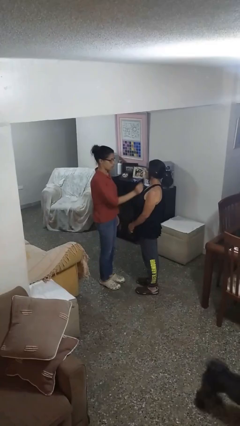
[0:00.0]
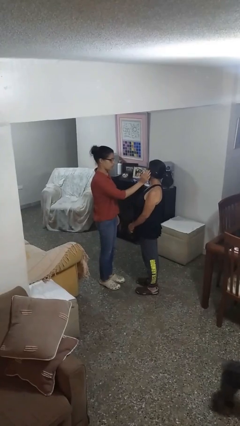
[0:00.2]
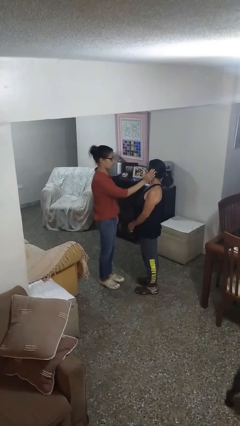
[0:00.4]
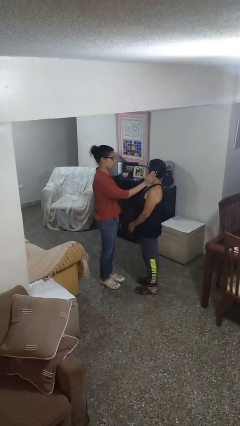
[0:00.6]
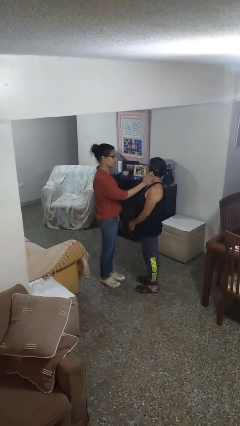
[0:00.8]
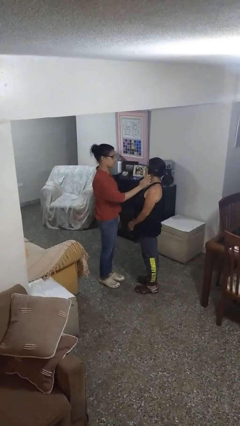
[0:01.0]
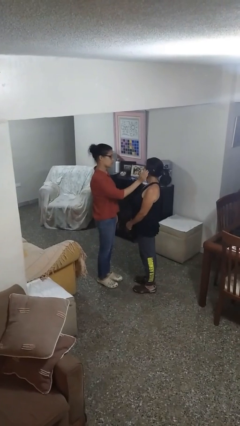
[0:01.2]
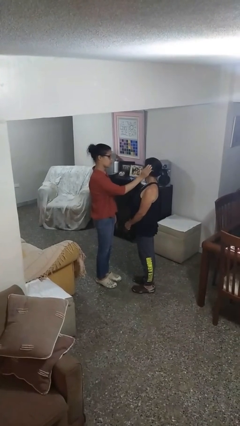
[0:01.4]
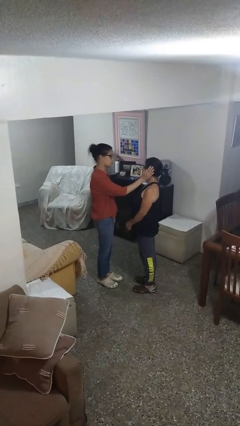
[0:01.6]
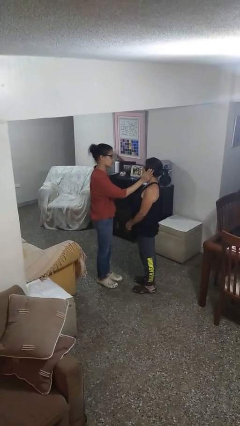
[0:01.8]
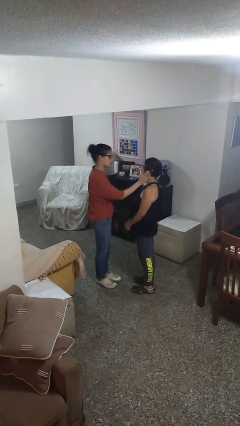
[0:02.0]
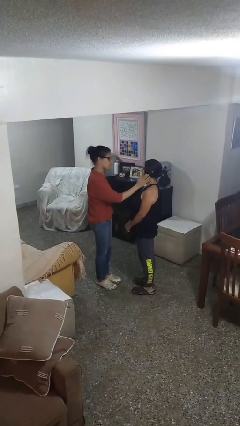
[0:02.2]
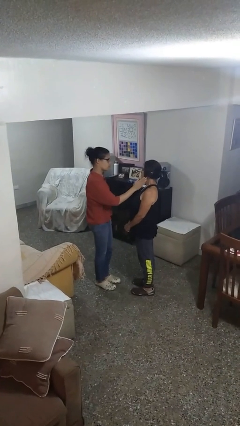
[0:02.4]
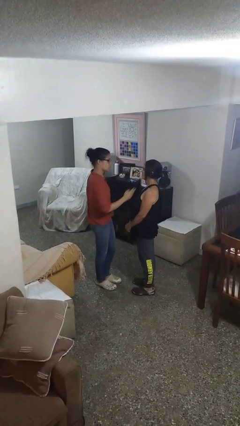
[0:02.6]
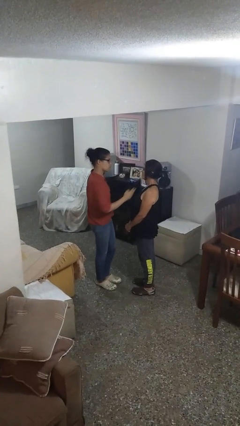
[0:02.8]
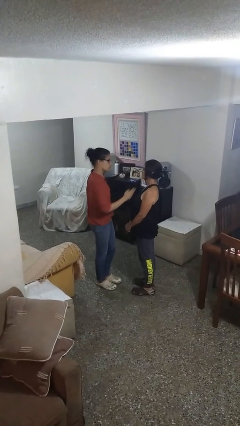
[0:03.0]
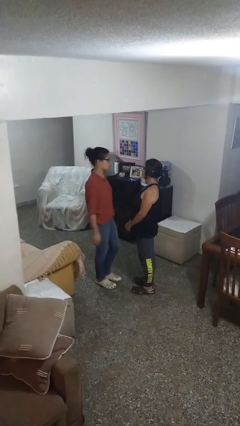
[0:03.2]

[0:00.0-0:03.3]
person touches face of person

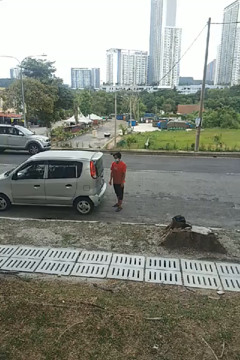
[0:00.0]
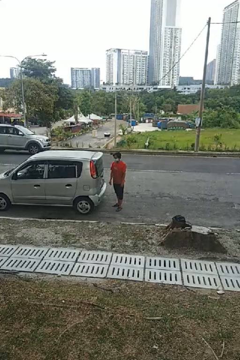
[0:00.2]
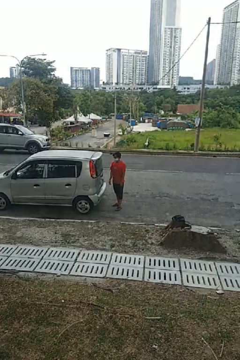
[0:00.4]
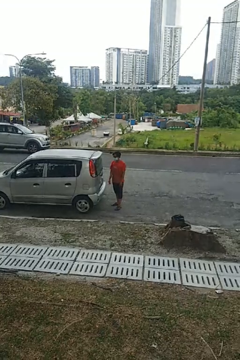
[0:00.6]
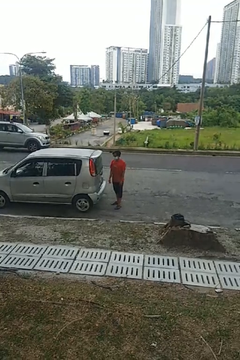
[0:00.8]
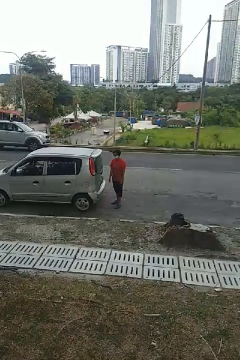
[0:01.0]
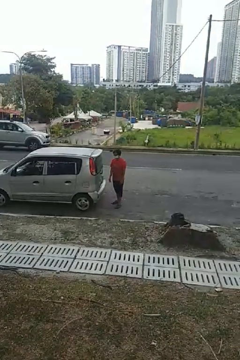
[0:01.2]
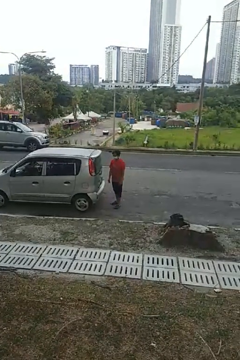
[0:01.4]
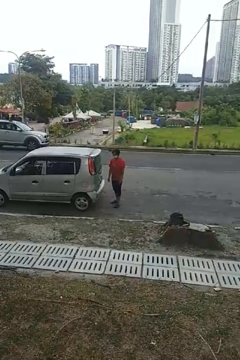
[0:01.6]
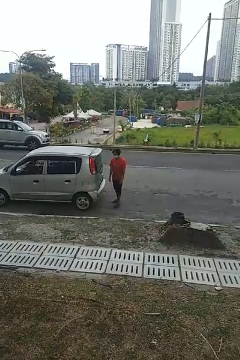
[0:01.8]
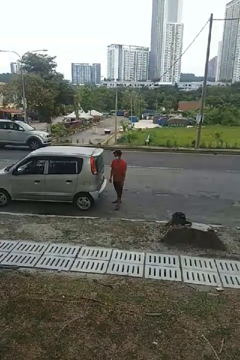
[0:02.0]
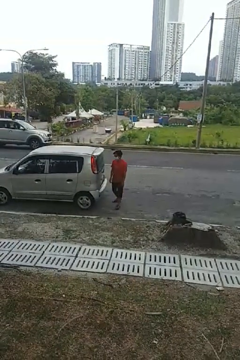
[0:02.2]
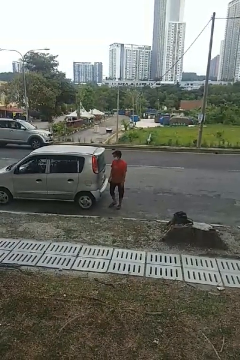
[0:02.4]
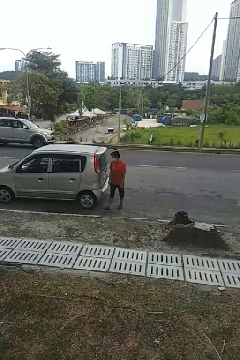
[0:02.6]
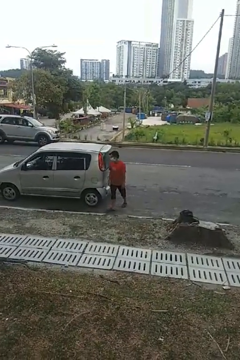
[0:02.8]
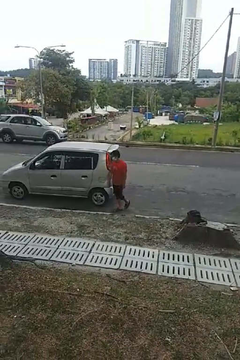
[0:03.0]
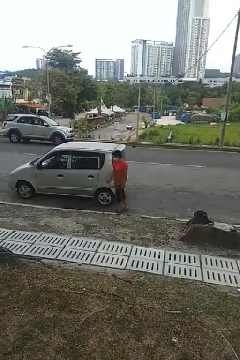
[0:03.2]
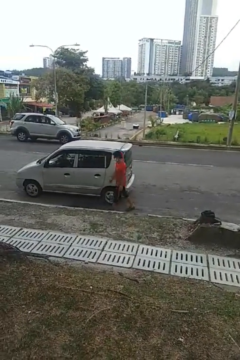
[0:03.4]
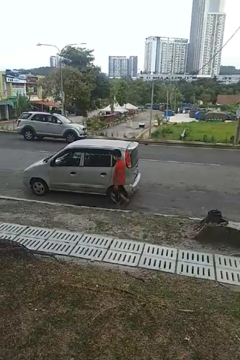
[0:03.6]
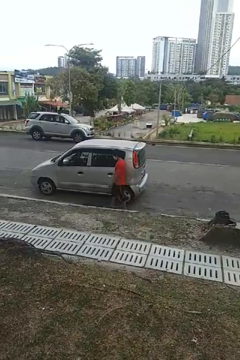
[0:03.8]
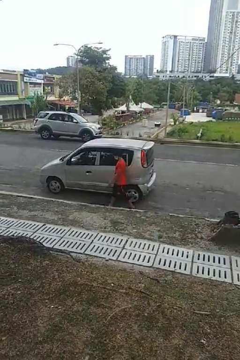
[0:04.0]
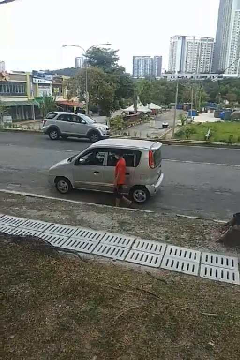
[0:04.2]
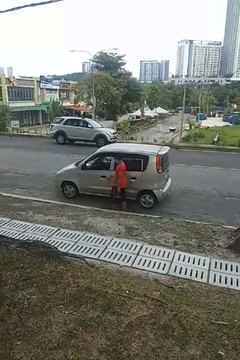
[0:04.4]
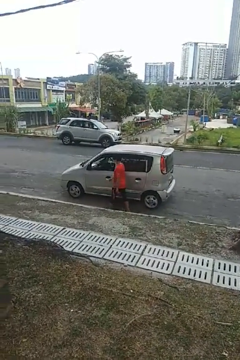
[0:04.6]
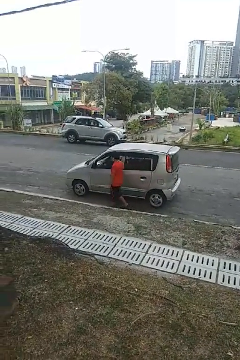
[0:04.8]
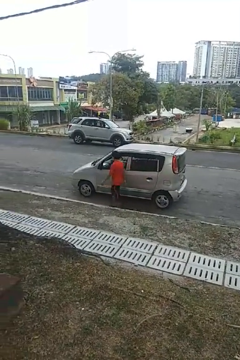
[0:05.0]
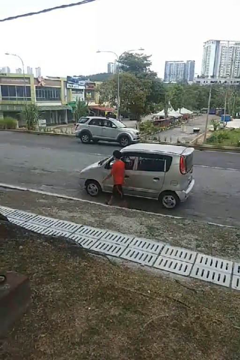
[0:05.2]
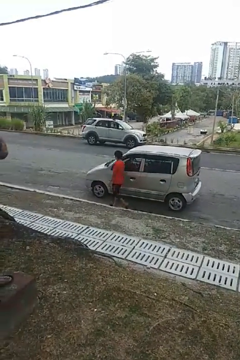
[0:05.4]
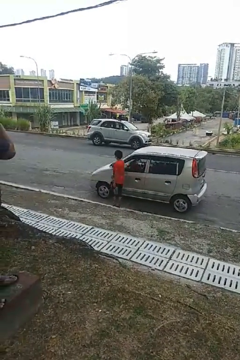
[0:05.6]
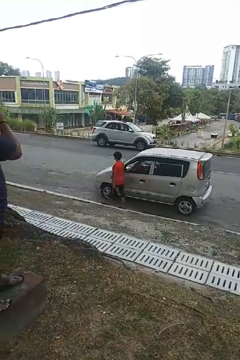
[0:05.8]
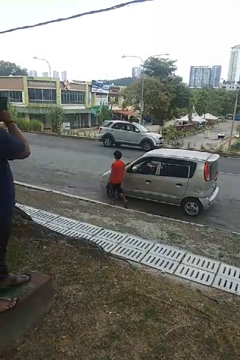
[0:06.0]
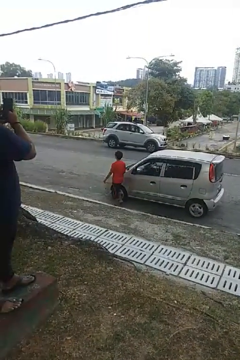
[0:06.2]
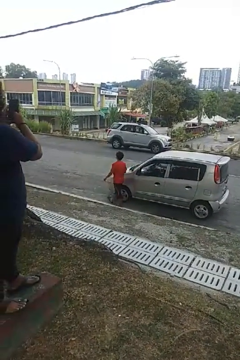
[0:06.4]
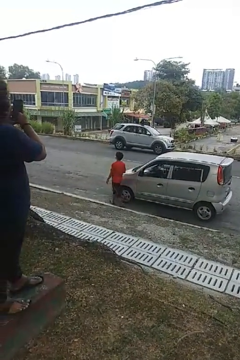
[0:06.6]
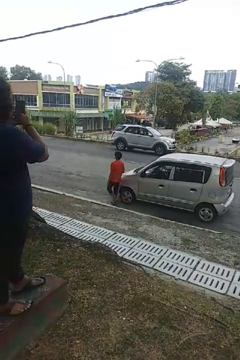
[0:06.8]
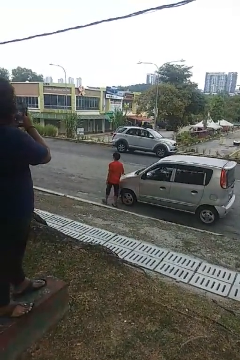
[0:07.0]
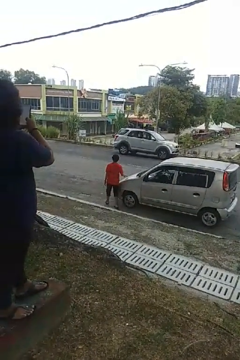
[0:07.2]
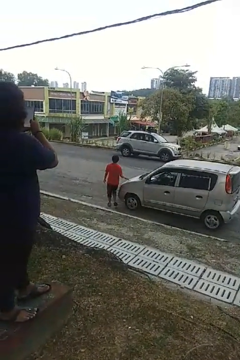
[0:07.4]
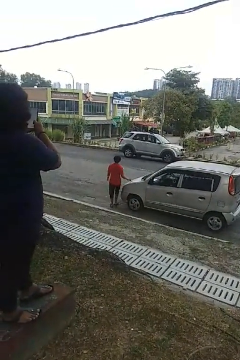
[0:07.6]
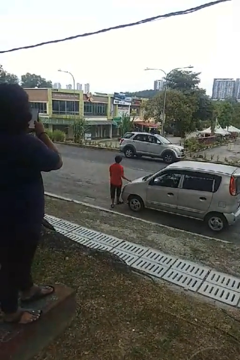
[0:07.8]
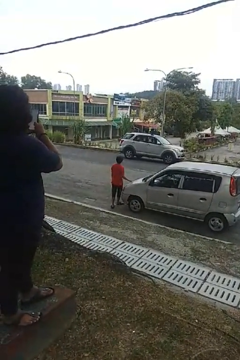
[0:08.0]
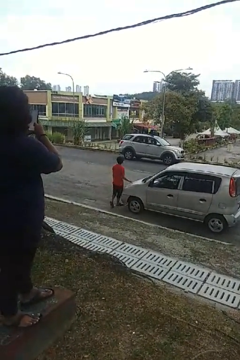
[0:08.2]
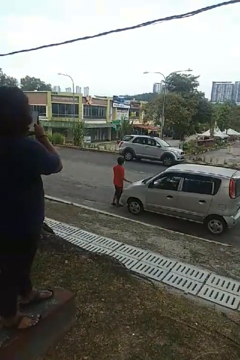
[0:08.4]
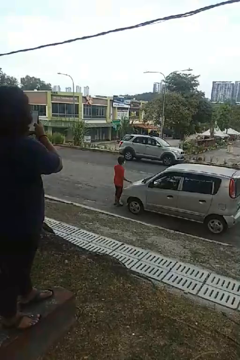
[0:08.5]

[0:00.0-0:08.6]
person walks around car

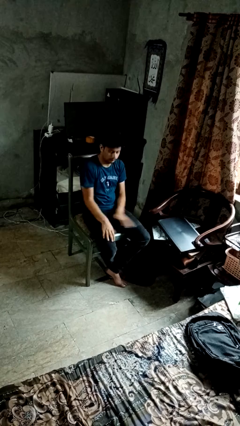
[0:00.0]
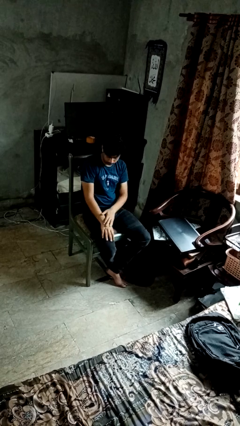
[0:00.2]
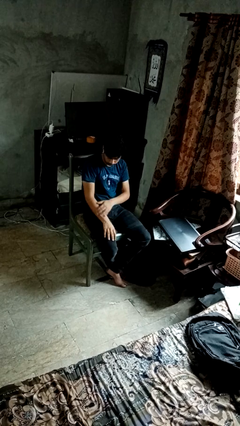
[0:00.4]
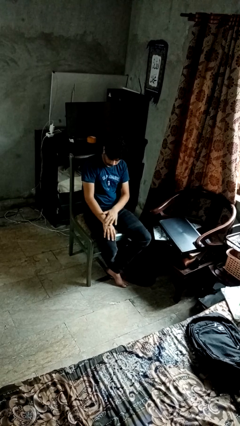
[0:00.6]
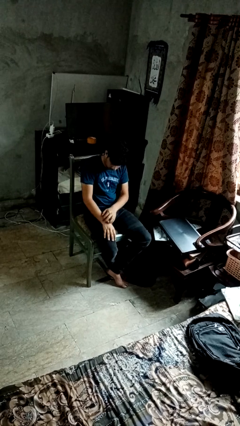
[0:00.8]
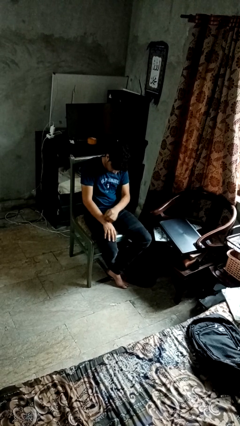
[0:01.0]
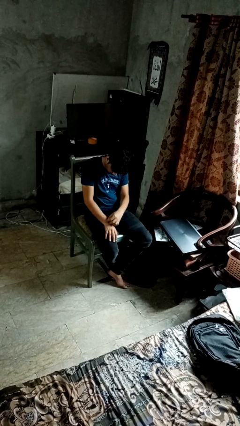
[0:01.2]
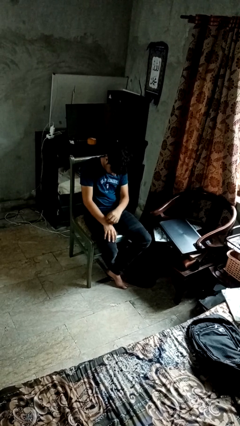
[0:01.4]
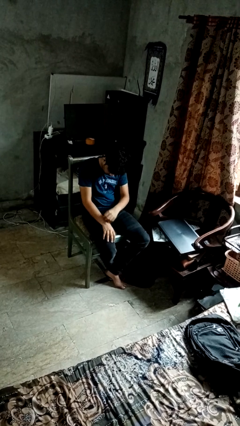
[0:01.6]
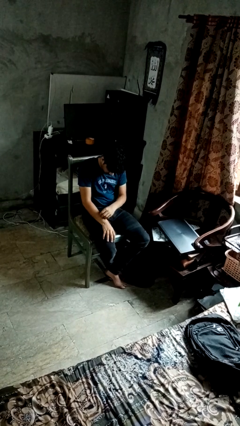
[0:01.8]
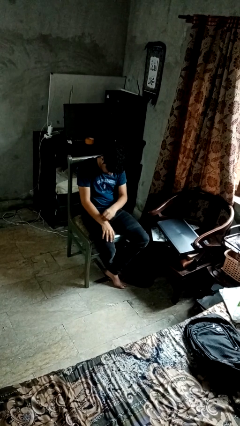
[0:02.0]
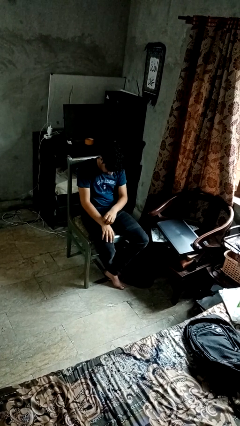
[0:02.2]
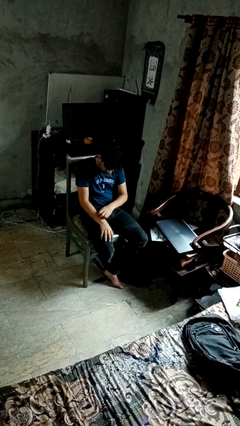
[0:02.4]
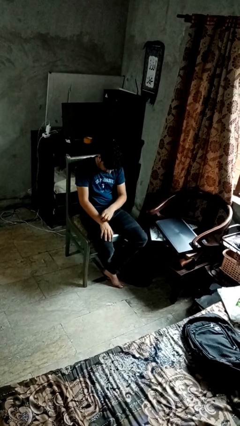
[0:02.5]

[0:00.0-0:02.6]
person swats bug

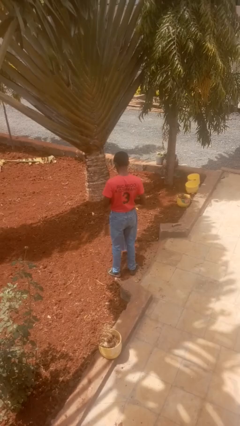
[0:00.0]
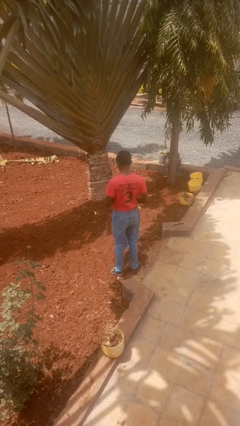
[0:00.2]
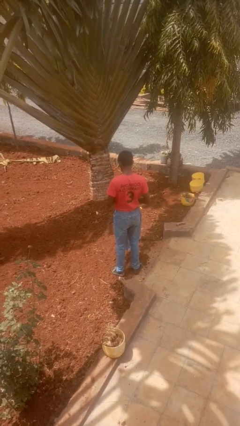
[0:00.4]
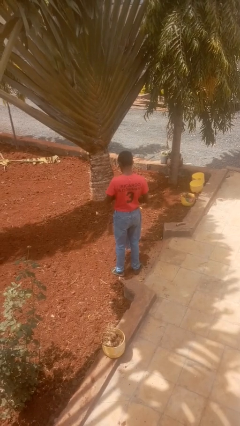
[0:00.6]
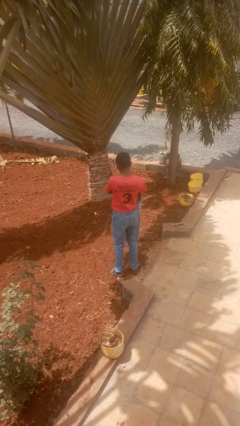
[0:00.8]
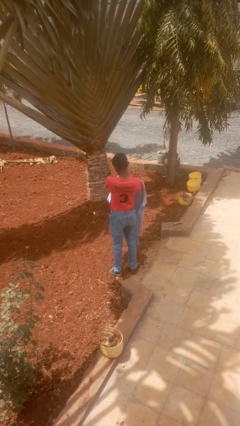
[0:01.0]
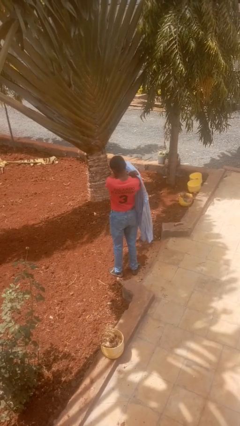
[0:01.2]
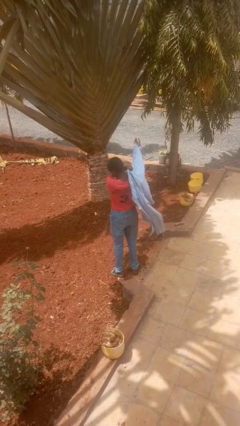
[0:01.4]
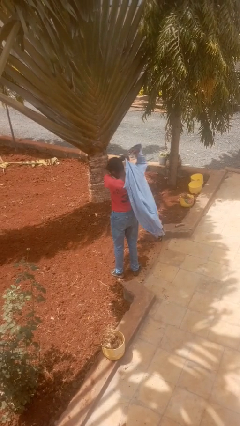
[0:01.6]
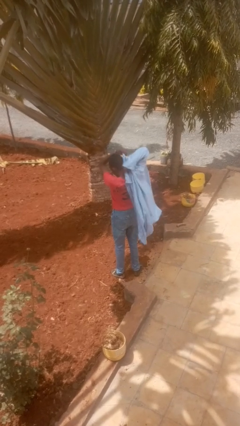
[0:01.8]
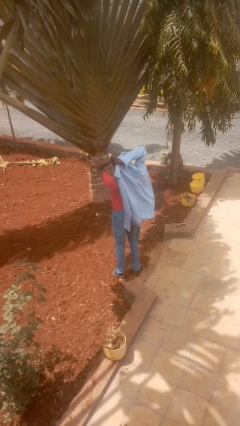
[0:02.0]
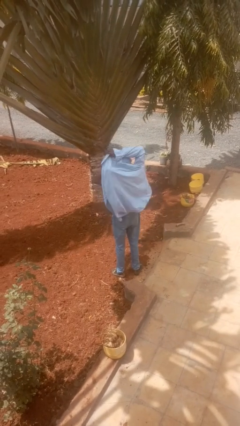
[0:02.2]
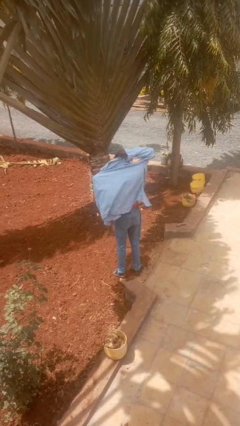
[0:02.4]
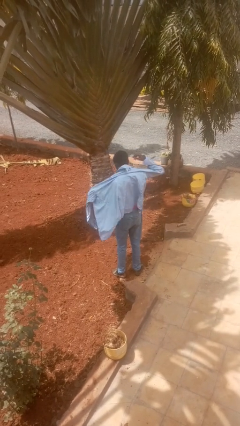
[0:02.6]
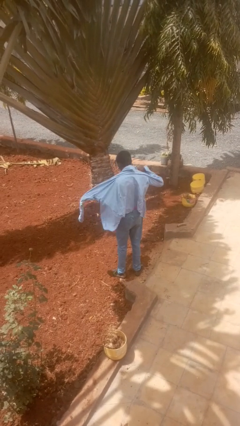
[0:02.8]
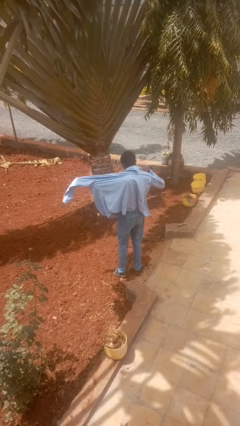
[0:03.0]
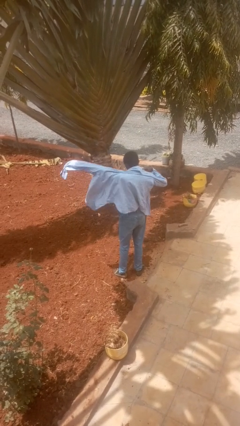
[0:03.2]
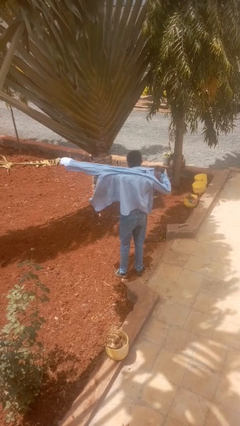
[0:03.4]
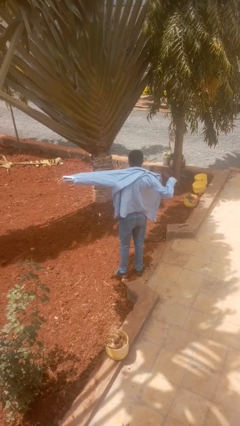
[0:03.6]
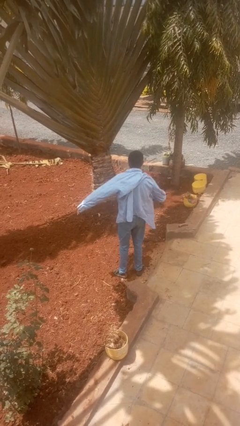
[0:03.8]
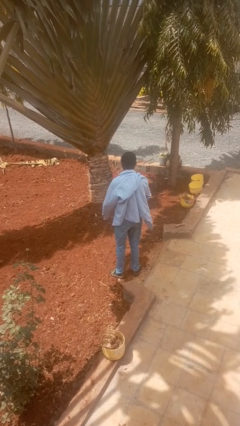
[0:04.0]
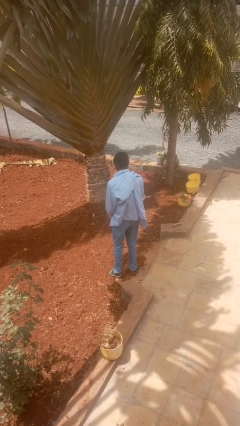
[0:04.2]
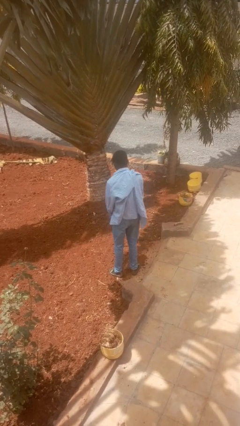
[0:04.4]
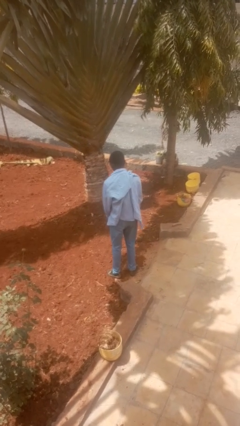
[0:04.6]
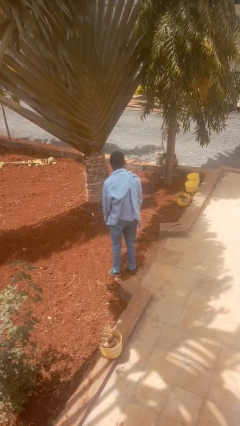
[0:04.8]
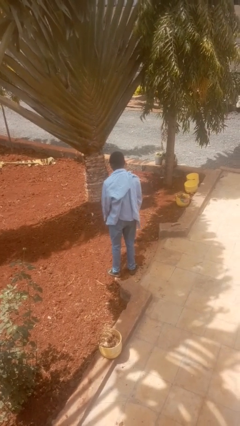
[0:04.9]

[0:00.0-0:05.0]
person puts on shirt
